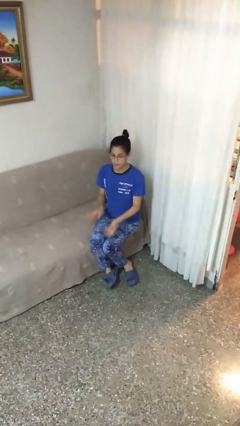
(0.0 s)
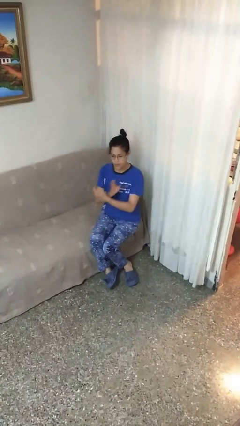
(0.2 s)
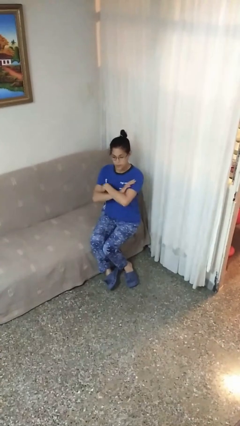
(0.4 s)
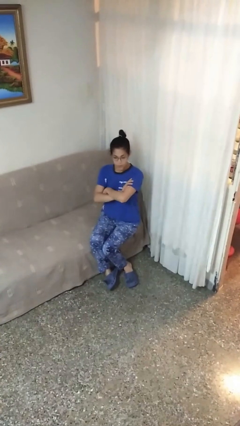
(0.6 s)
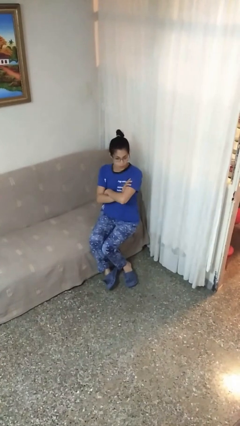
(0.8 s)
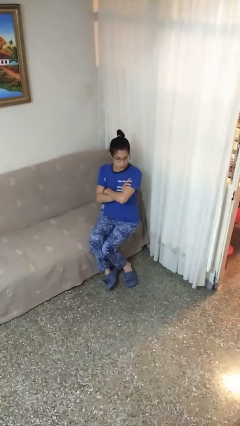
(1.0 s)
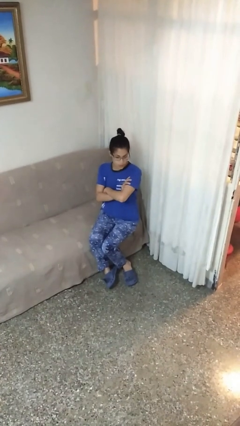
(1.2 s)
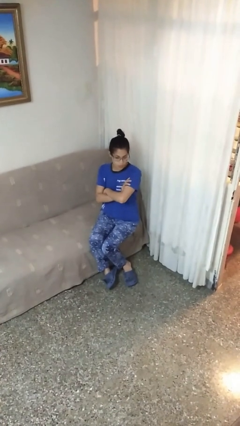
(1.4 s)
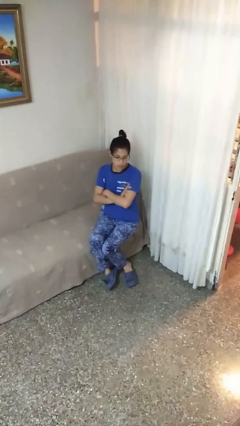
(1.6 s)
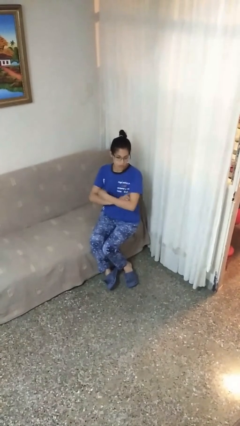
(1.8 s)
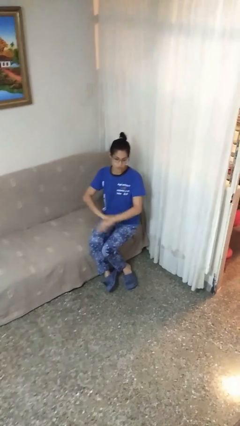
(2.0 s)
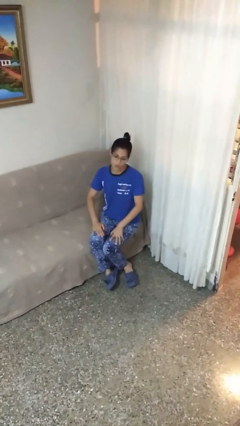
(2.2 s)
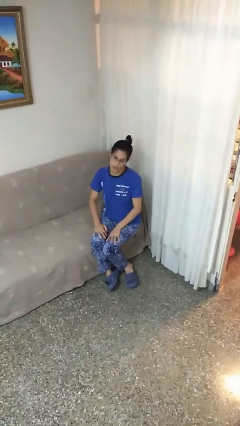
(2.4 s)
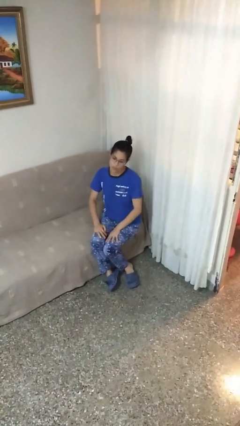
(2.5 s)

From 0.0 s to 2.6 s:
person crosses arms

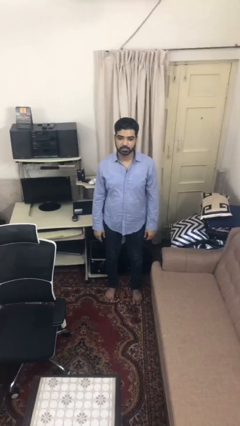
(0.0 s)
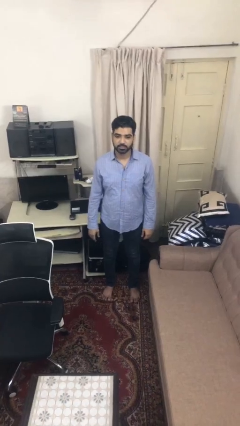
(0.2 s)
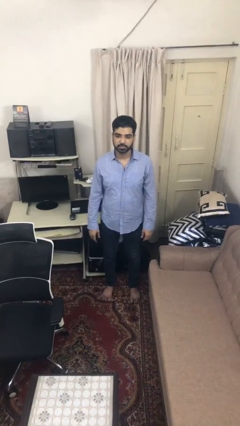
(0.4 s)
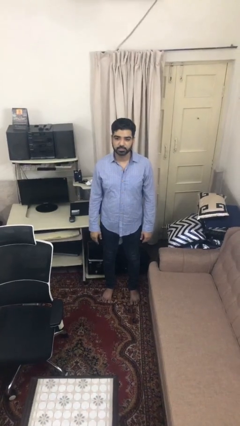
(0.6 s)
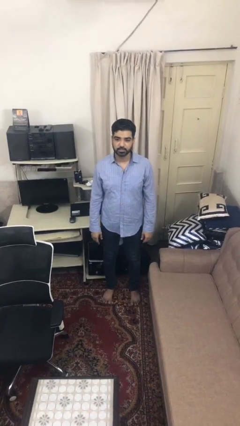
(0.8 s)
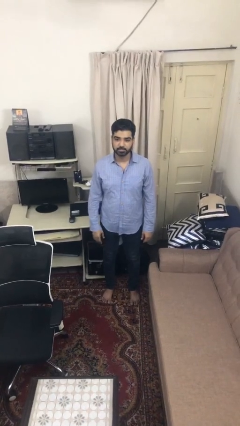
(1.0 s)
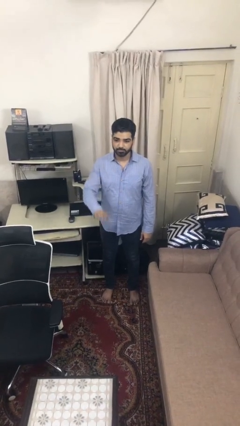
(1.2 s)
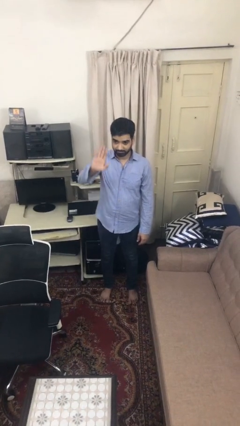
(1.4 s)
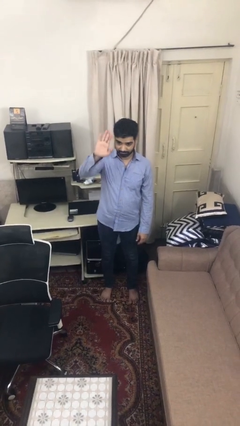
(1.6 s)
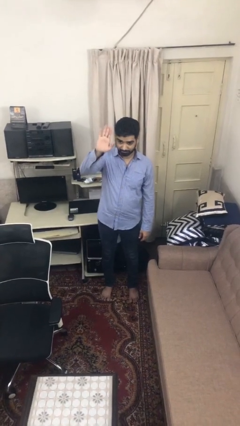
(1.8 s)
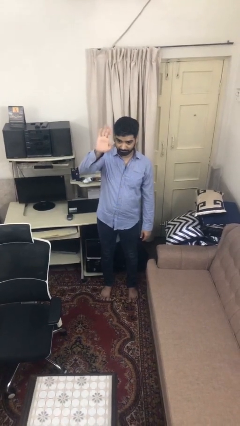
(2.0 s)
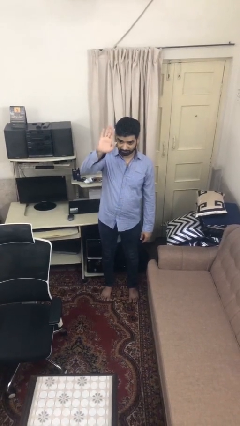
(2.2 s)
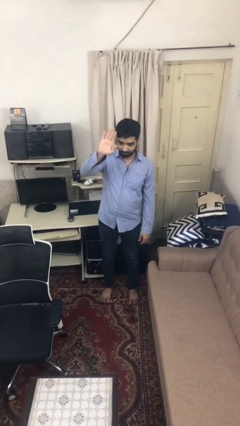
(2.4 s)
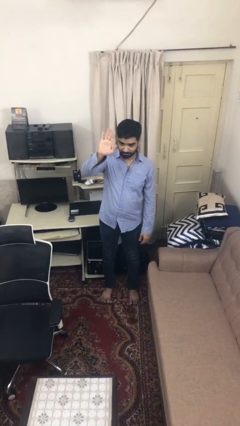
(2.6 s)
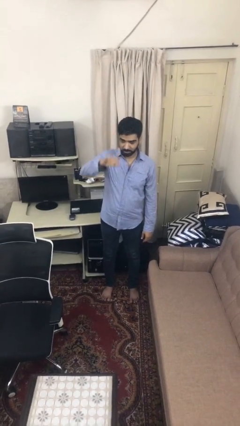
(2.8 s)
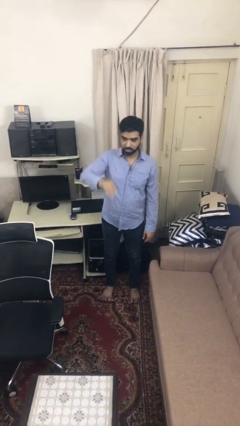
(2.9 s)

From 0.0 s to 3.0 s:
person waves at person

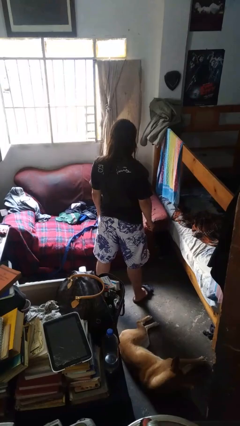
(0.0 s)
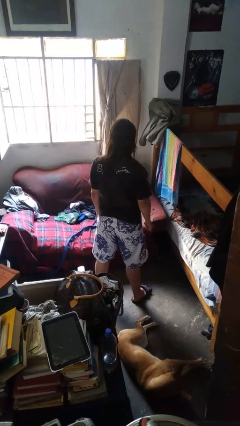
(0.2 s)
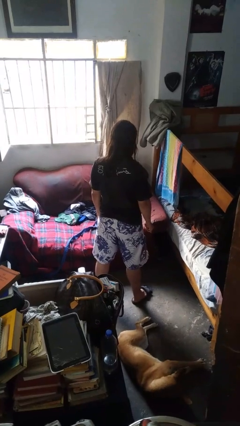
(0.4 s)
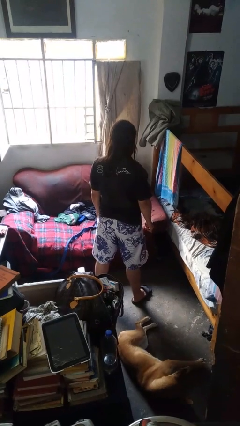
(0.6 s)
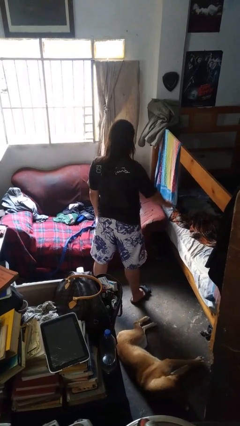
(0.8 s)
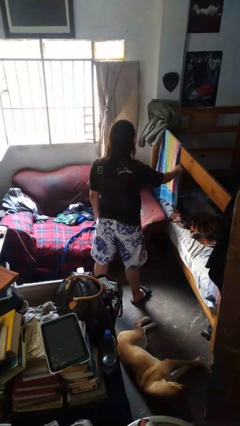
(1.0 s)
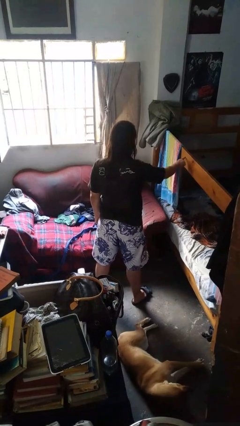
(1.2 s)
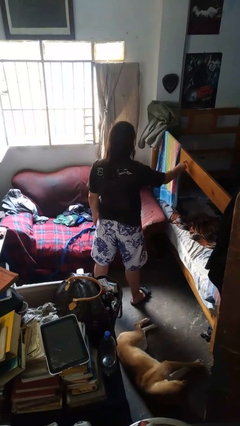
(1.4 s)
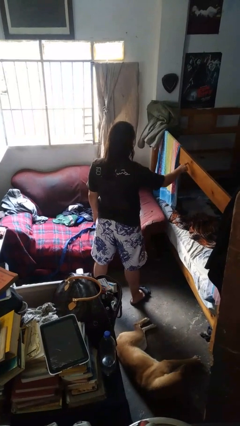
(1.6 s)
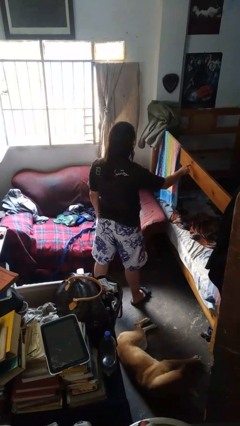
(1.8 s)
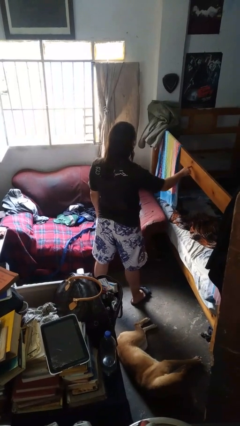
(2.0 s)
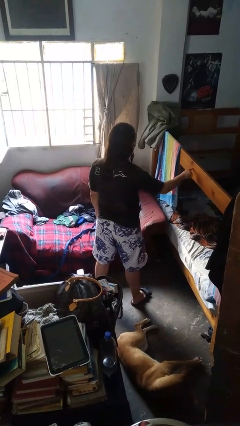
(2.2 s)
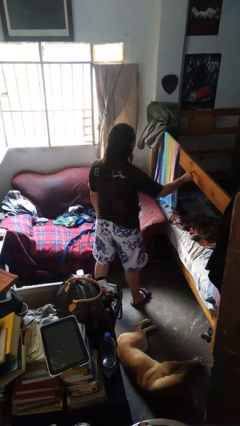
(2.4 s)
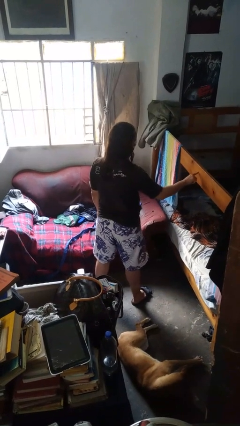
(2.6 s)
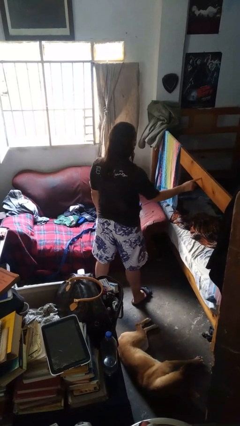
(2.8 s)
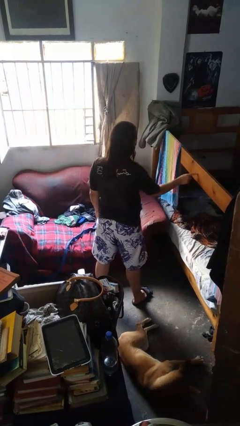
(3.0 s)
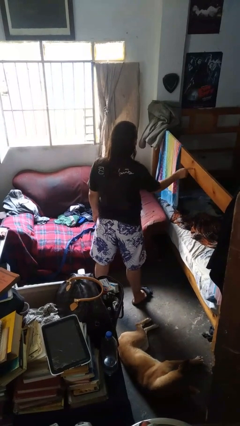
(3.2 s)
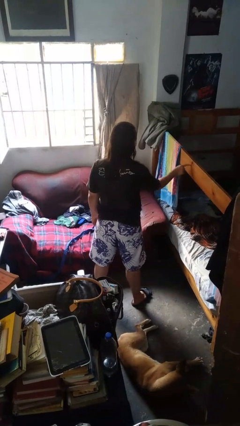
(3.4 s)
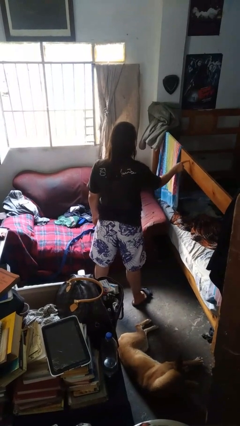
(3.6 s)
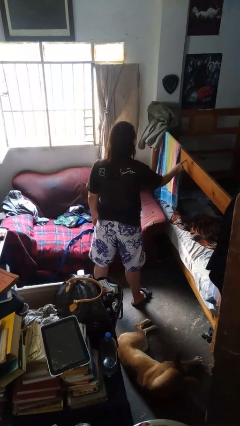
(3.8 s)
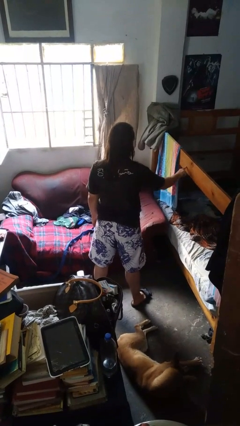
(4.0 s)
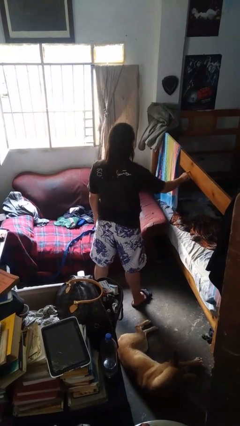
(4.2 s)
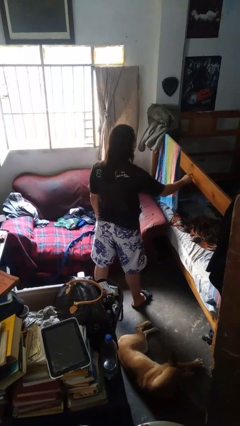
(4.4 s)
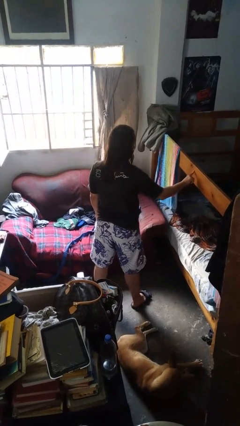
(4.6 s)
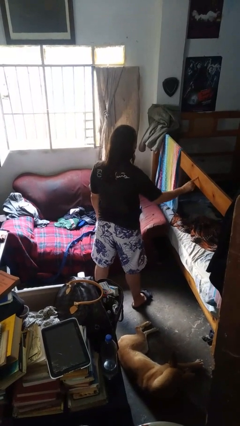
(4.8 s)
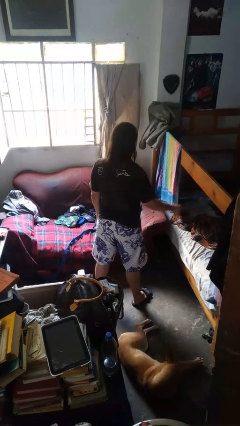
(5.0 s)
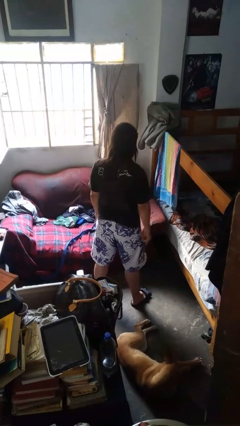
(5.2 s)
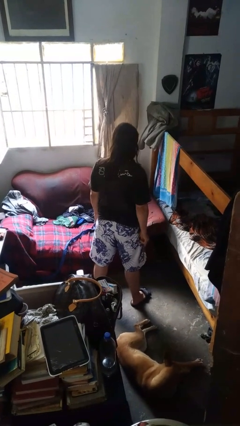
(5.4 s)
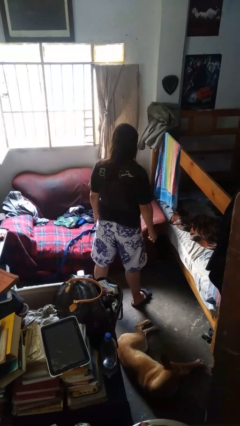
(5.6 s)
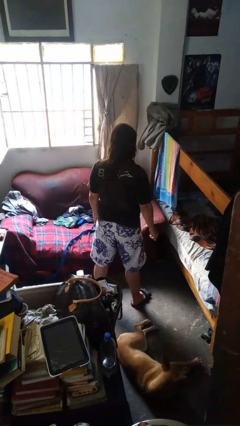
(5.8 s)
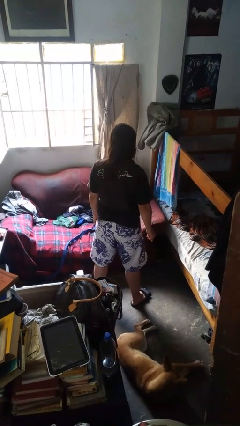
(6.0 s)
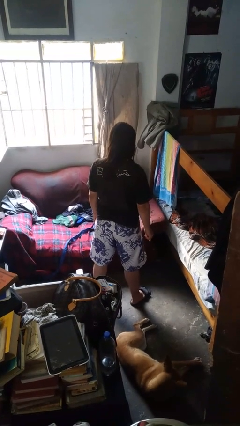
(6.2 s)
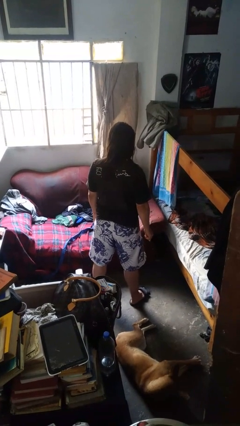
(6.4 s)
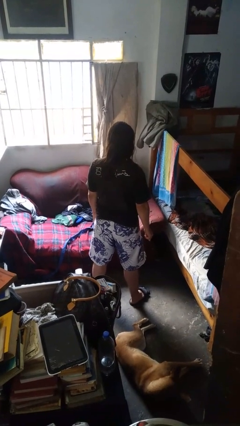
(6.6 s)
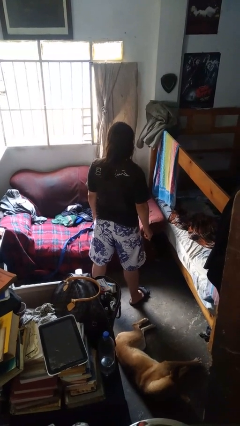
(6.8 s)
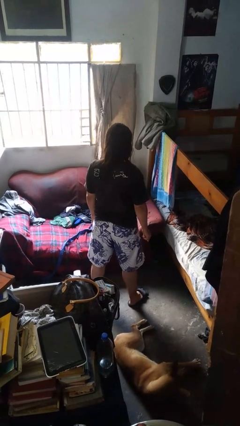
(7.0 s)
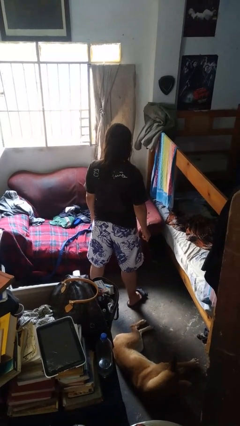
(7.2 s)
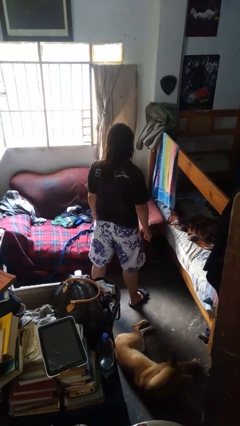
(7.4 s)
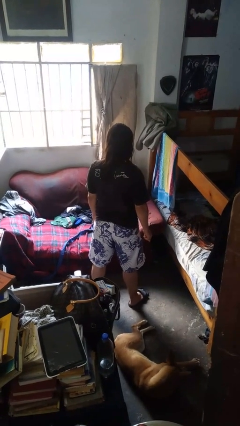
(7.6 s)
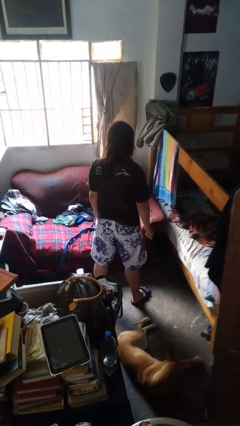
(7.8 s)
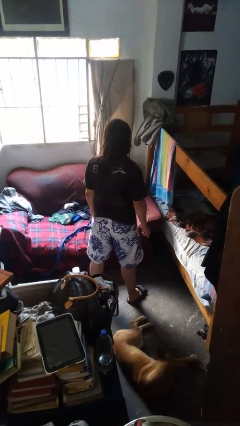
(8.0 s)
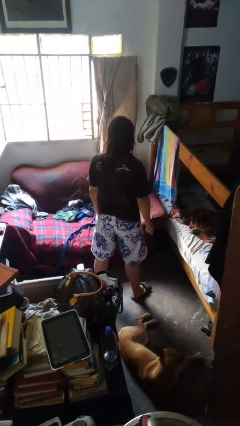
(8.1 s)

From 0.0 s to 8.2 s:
person taps object with finger

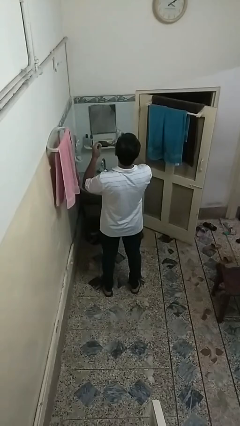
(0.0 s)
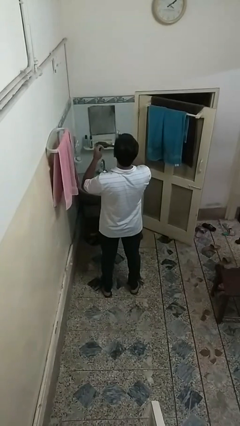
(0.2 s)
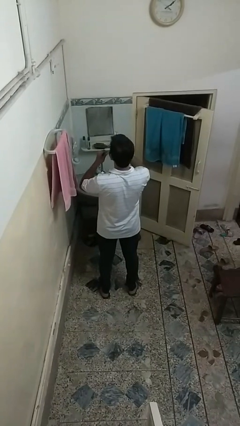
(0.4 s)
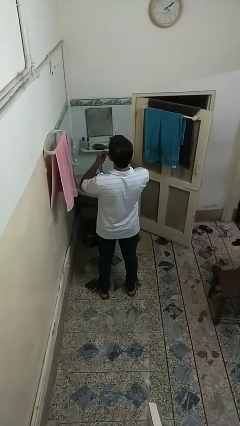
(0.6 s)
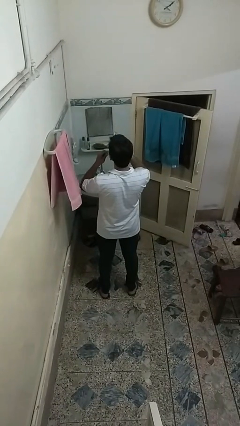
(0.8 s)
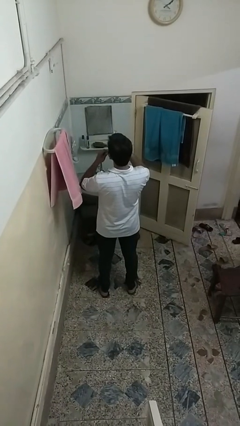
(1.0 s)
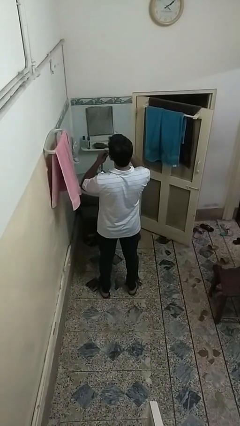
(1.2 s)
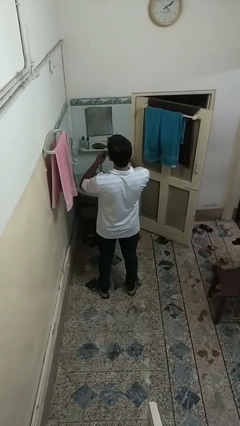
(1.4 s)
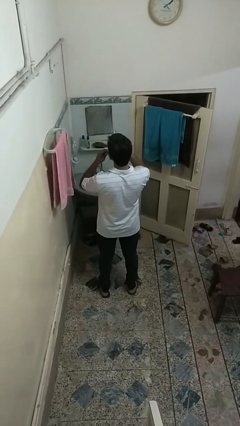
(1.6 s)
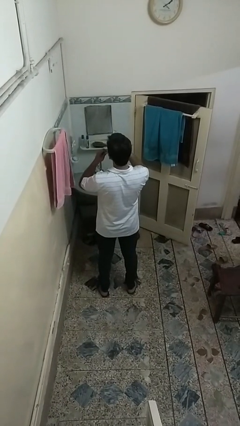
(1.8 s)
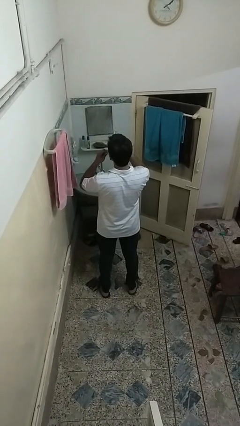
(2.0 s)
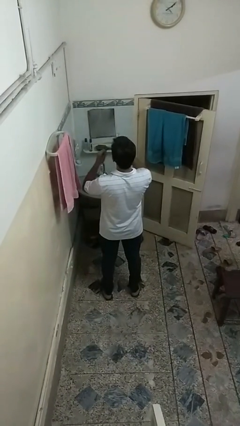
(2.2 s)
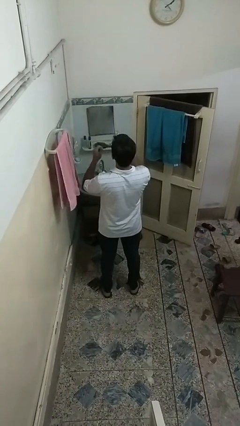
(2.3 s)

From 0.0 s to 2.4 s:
person flosses

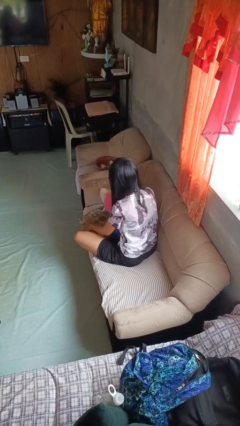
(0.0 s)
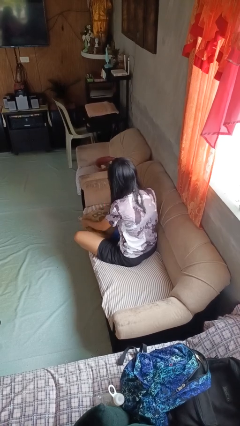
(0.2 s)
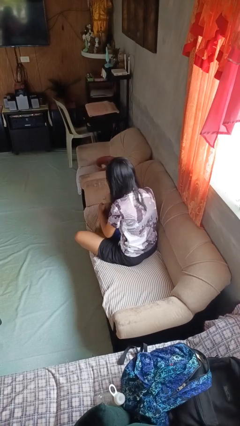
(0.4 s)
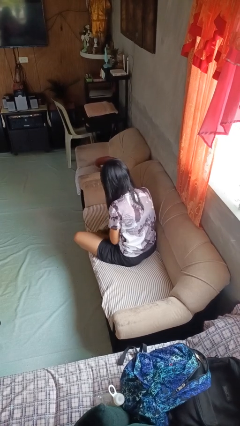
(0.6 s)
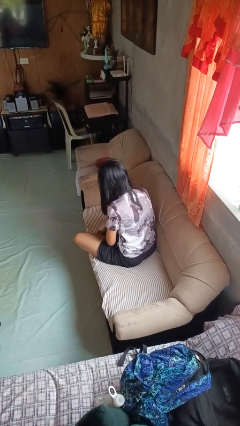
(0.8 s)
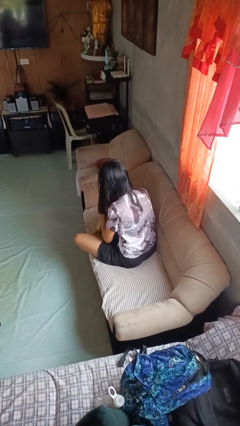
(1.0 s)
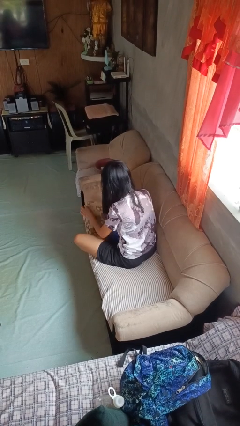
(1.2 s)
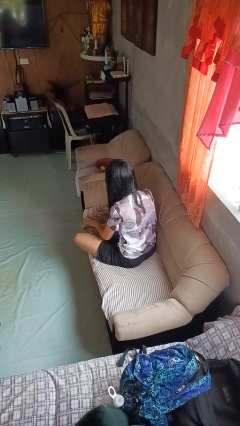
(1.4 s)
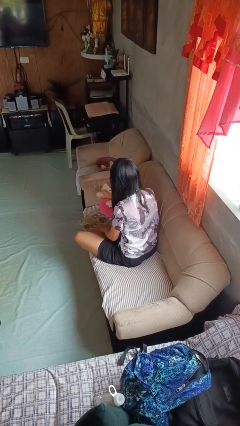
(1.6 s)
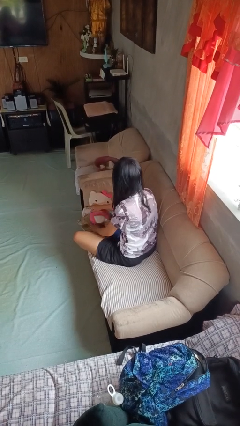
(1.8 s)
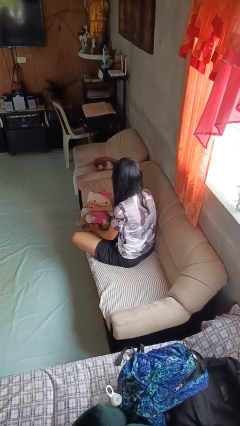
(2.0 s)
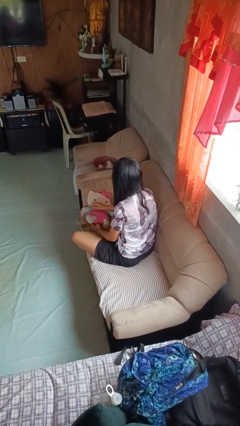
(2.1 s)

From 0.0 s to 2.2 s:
person searches in couch
